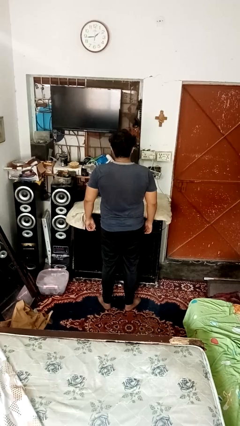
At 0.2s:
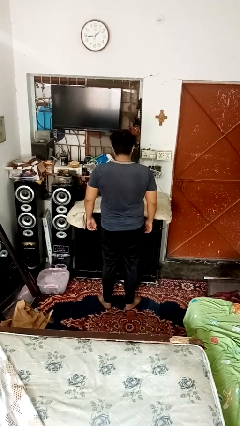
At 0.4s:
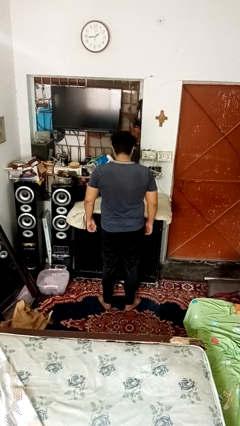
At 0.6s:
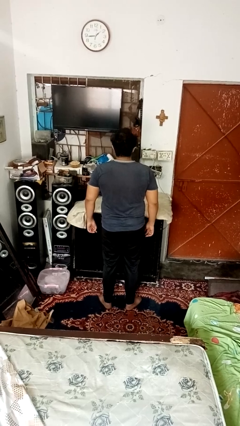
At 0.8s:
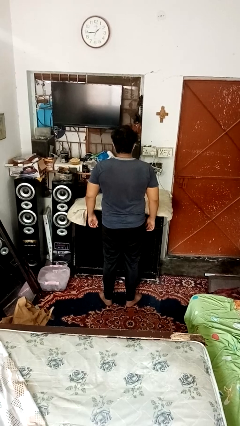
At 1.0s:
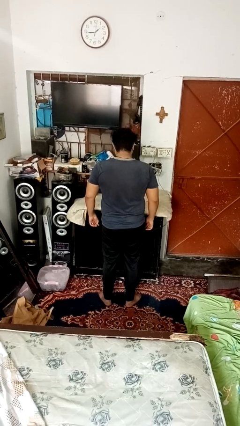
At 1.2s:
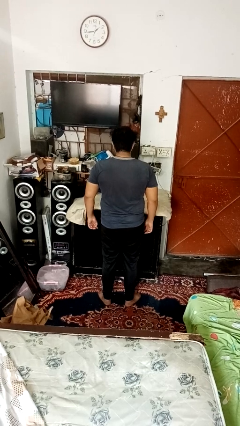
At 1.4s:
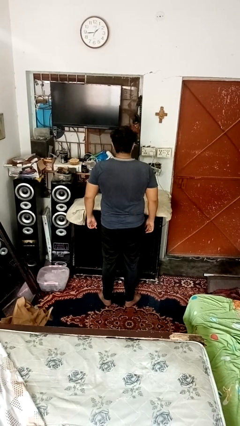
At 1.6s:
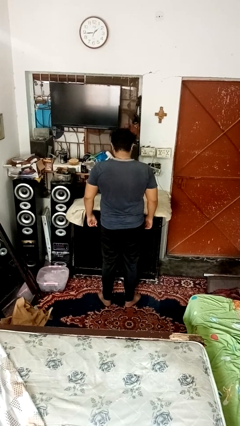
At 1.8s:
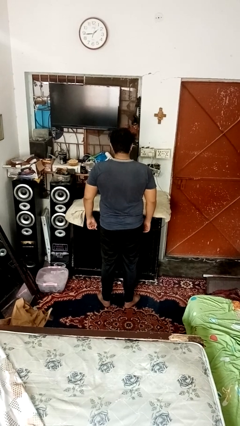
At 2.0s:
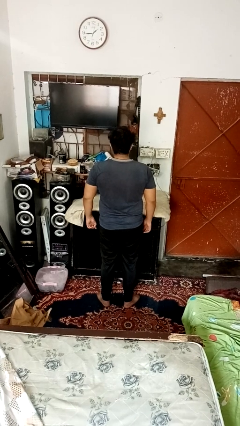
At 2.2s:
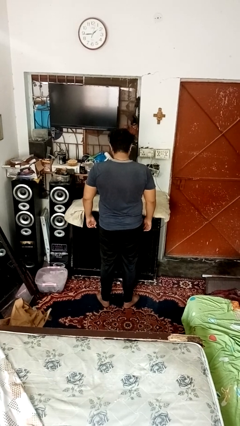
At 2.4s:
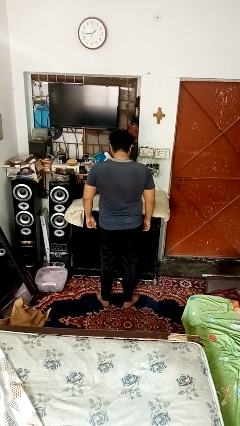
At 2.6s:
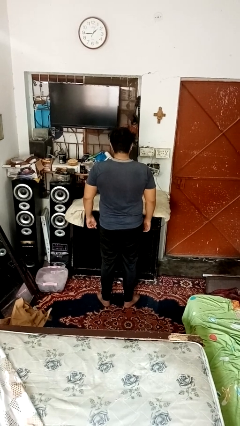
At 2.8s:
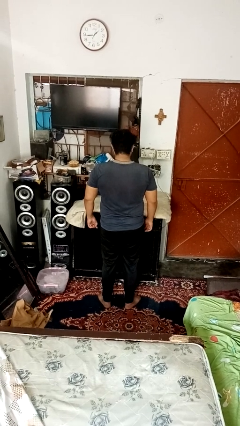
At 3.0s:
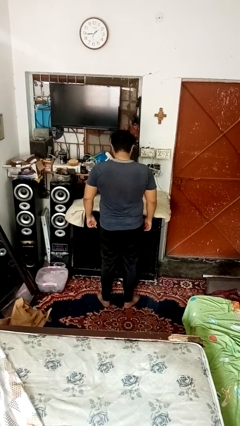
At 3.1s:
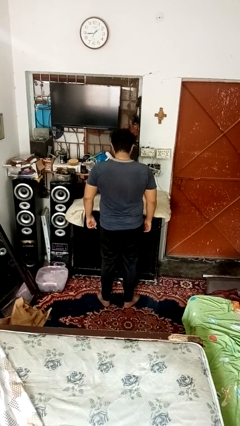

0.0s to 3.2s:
person nods head

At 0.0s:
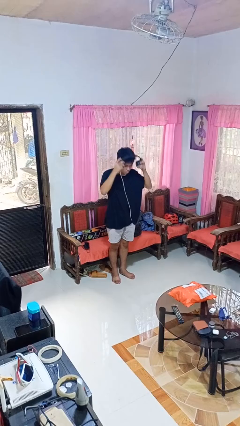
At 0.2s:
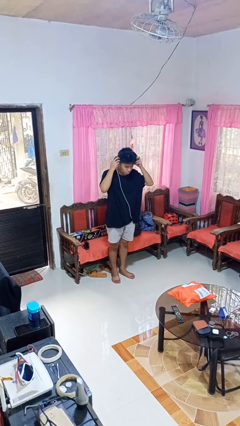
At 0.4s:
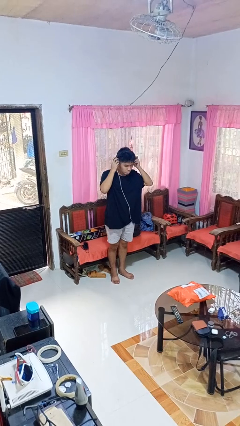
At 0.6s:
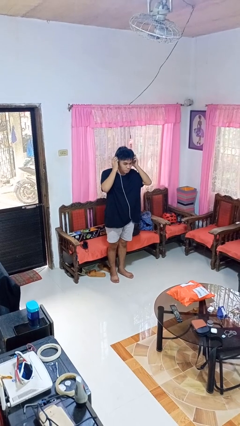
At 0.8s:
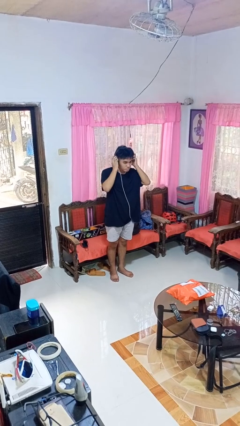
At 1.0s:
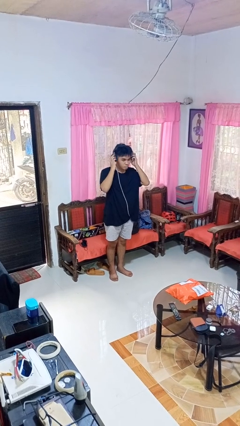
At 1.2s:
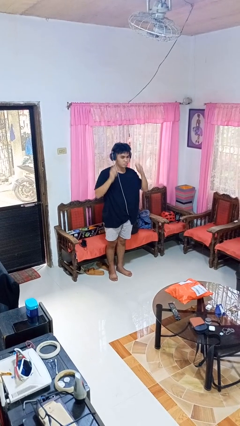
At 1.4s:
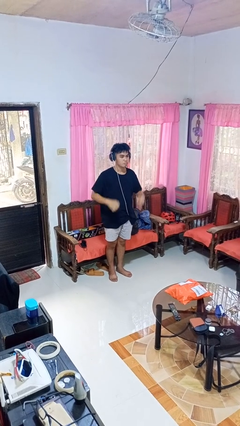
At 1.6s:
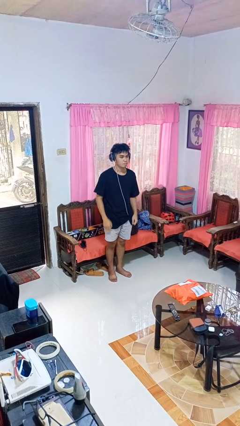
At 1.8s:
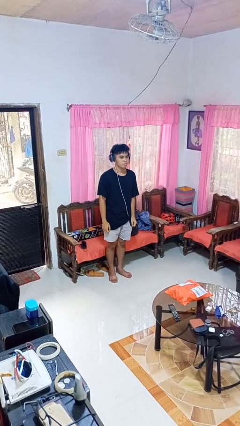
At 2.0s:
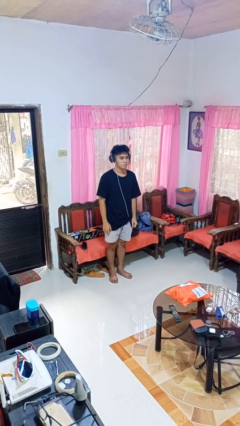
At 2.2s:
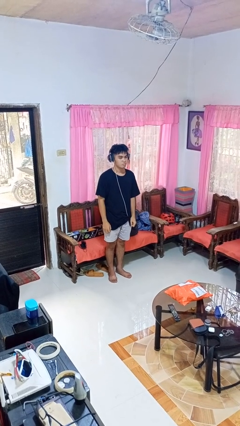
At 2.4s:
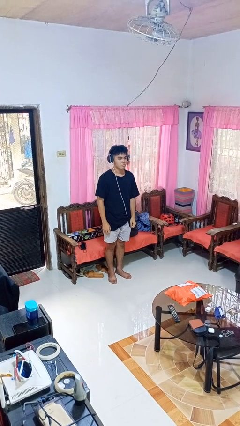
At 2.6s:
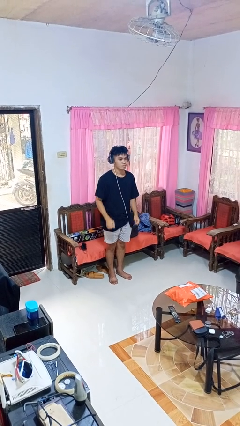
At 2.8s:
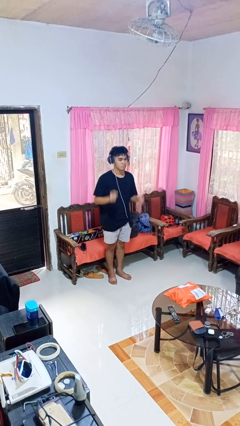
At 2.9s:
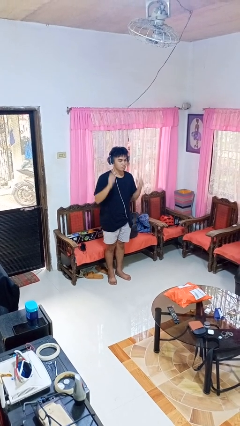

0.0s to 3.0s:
person puts on headphones

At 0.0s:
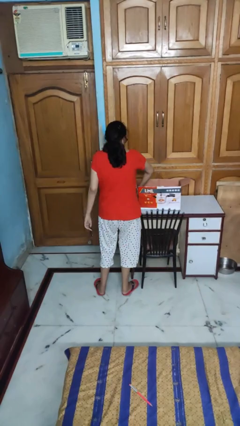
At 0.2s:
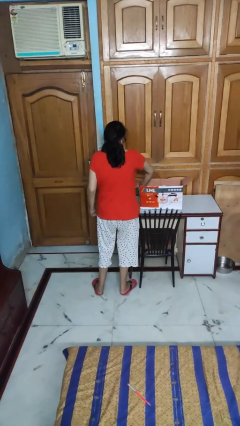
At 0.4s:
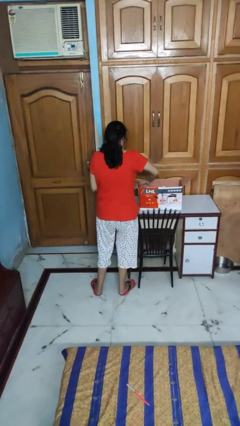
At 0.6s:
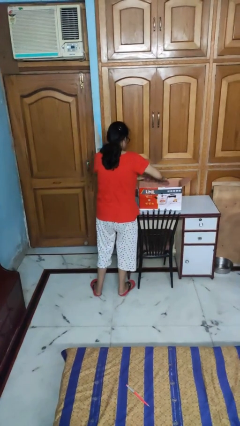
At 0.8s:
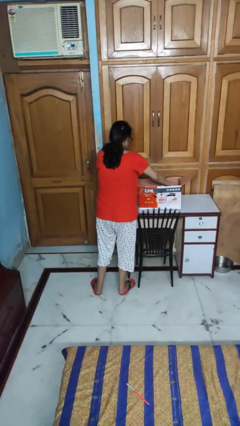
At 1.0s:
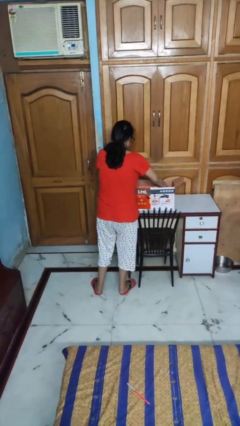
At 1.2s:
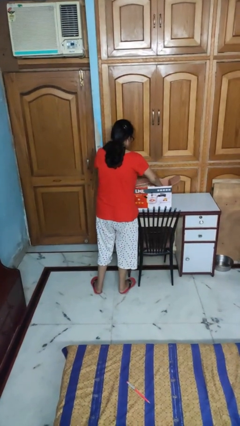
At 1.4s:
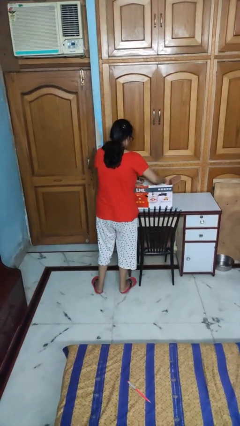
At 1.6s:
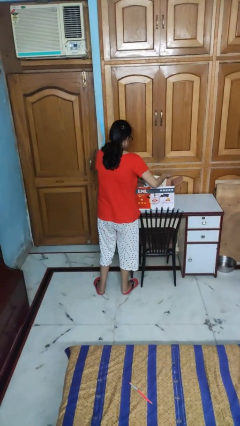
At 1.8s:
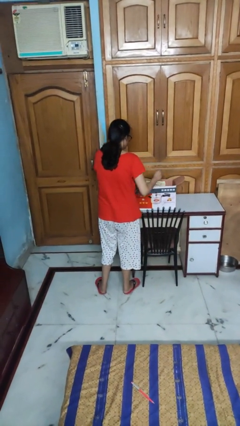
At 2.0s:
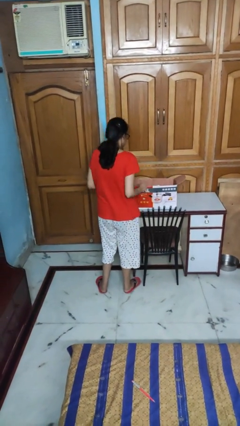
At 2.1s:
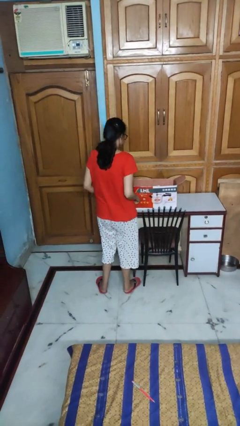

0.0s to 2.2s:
person searches in box

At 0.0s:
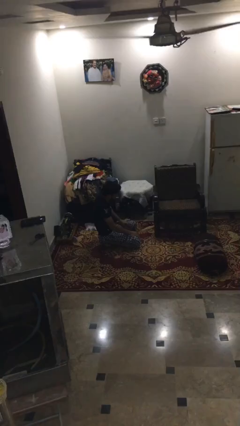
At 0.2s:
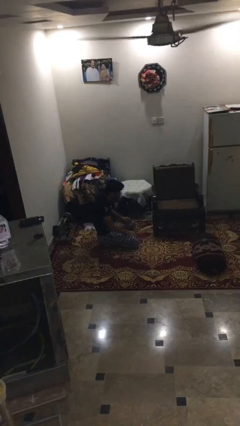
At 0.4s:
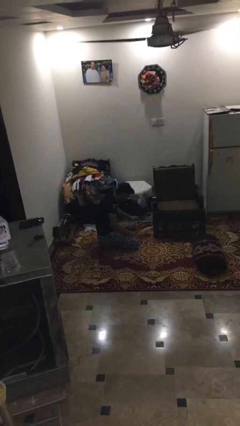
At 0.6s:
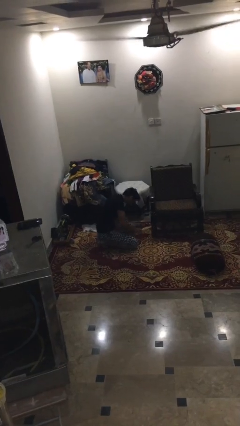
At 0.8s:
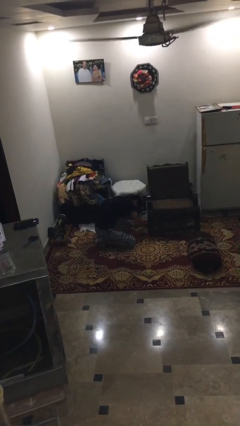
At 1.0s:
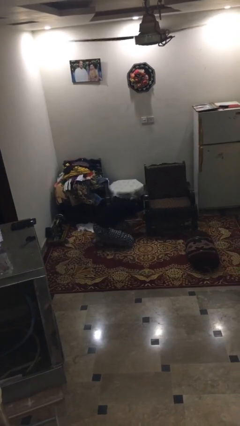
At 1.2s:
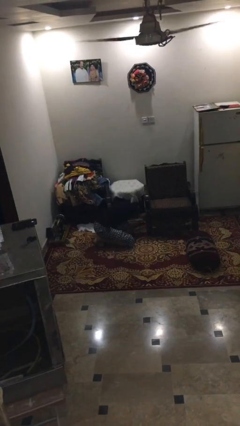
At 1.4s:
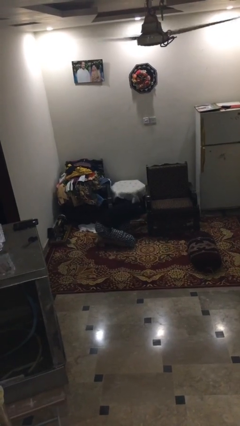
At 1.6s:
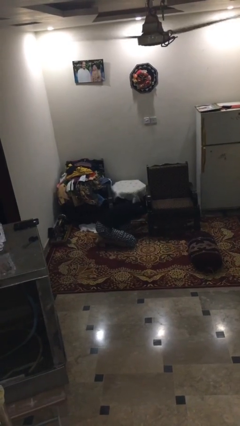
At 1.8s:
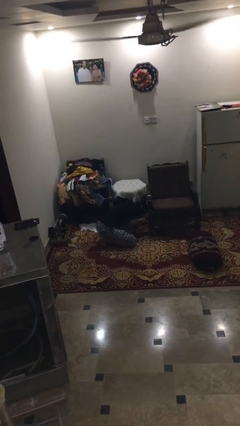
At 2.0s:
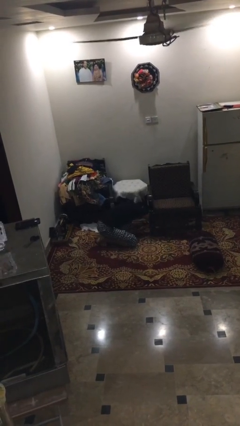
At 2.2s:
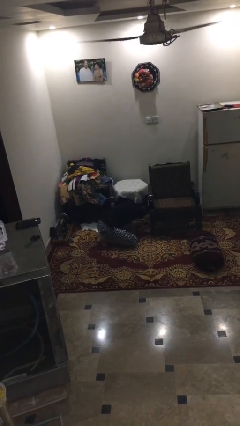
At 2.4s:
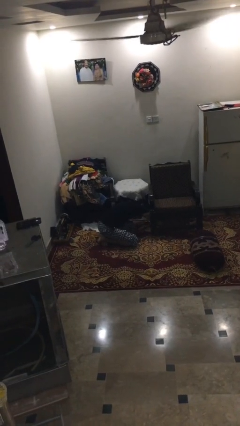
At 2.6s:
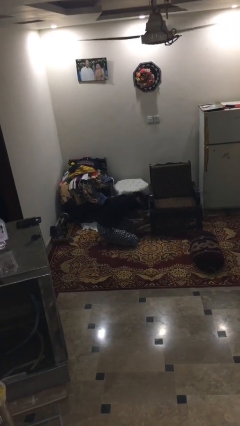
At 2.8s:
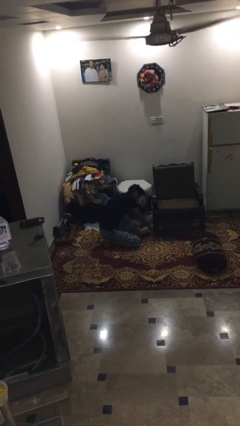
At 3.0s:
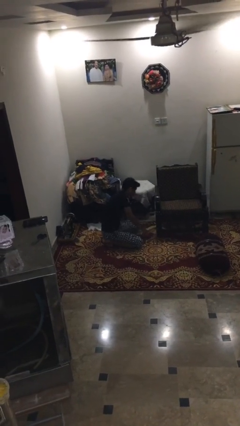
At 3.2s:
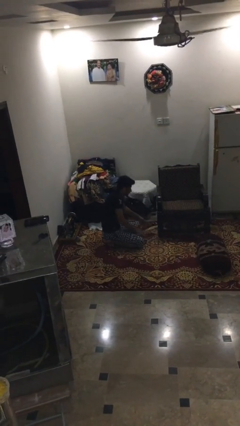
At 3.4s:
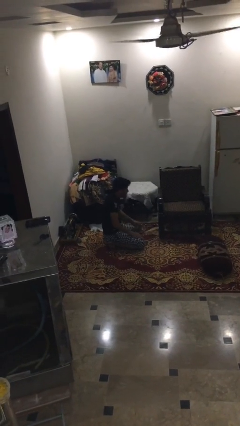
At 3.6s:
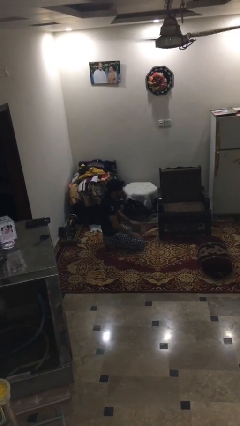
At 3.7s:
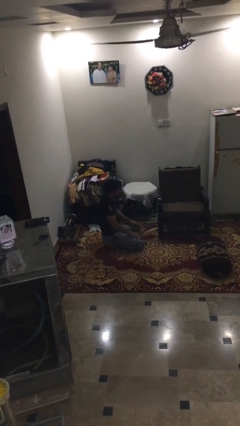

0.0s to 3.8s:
person searches in couch

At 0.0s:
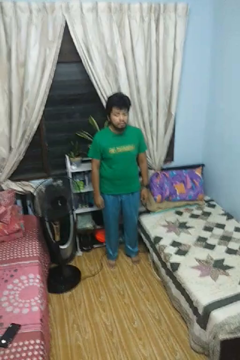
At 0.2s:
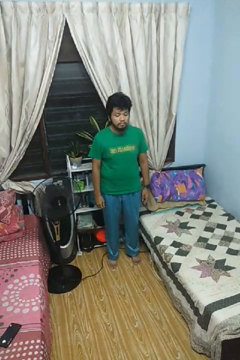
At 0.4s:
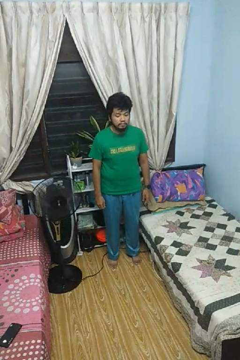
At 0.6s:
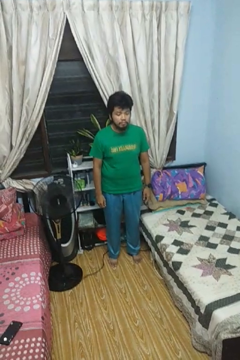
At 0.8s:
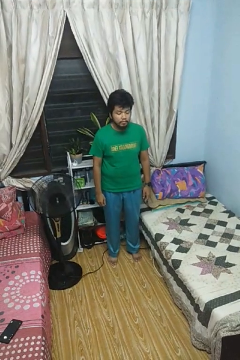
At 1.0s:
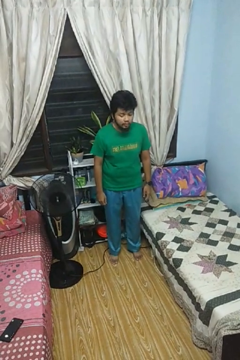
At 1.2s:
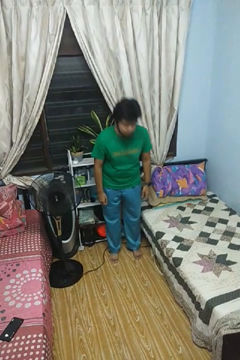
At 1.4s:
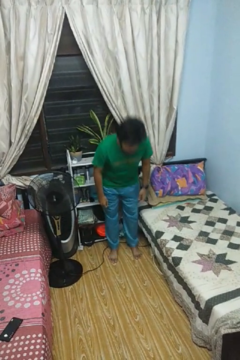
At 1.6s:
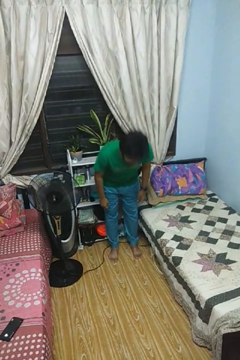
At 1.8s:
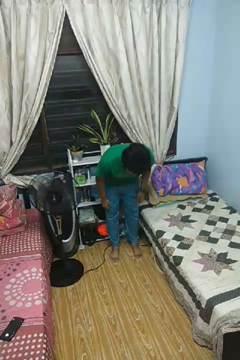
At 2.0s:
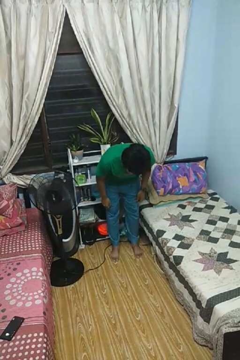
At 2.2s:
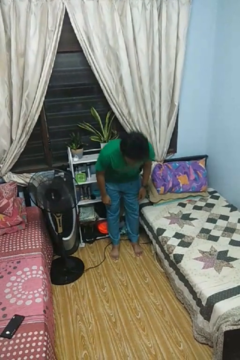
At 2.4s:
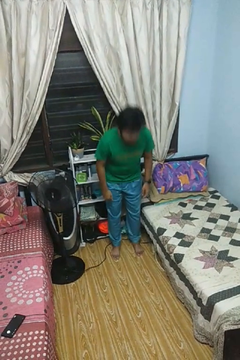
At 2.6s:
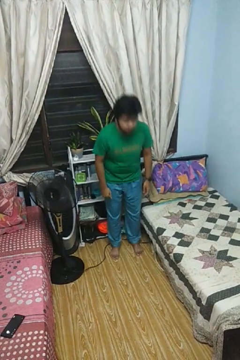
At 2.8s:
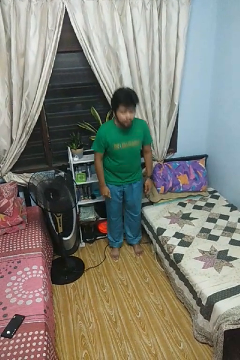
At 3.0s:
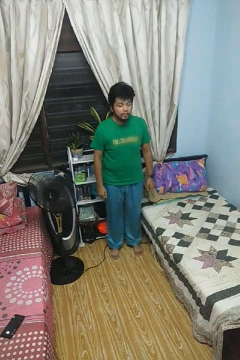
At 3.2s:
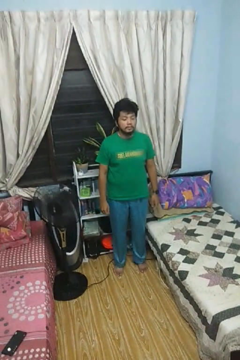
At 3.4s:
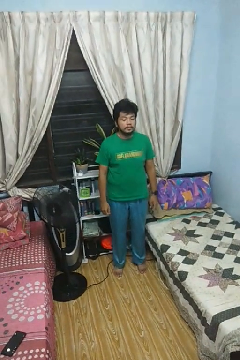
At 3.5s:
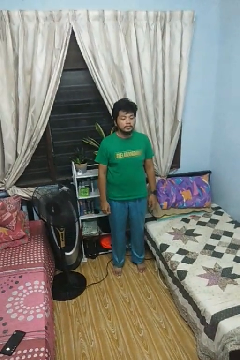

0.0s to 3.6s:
person bows

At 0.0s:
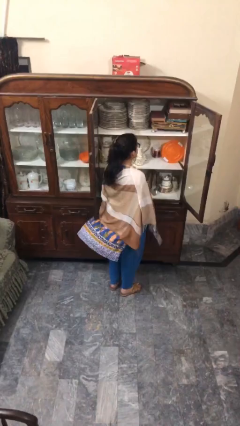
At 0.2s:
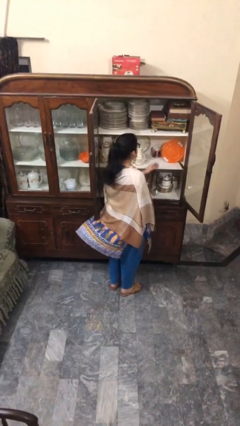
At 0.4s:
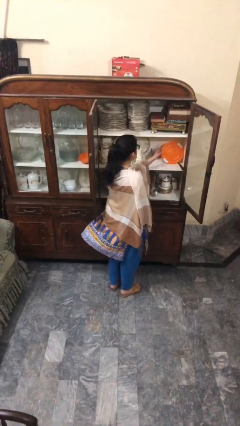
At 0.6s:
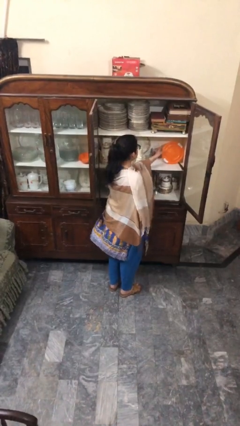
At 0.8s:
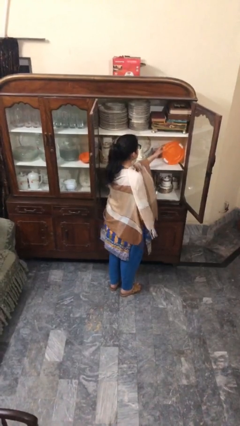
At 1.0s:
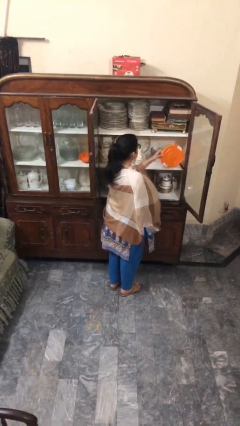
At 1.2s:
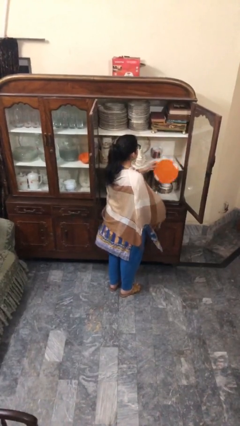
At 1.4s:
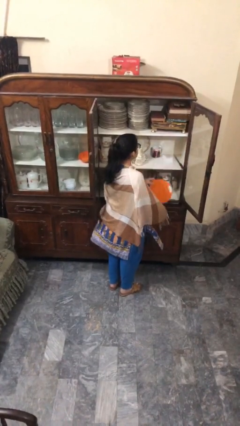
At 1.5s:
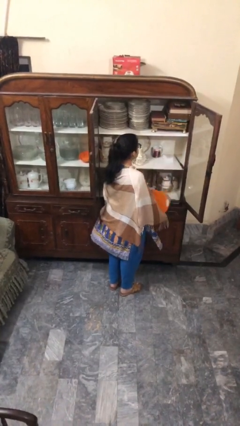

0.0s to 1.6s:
person takes object from cabinet

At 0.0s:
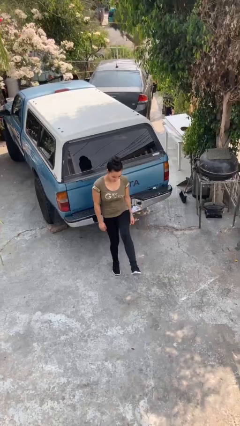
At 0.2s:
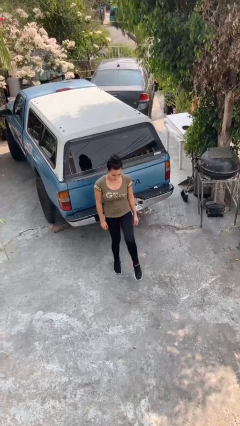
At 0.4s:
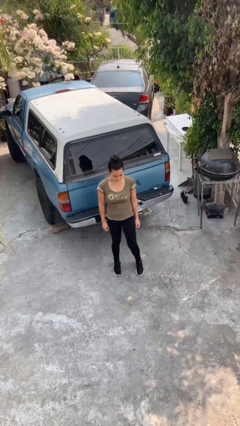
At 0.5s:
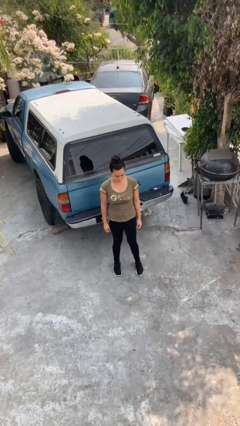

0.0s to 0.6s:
person karate kicks
